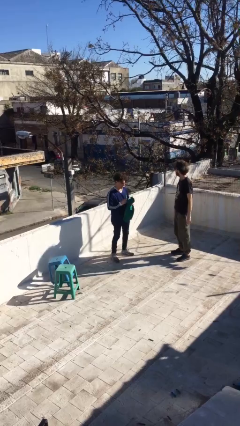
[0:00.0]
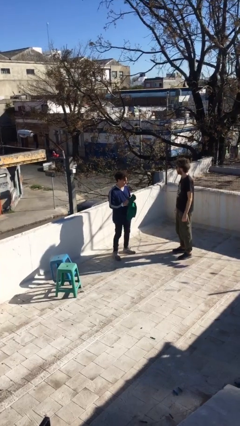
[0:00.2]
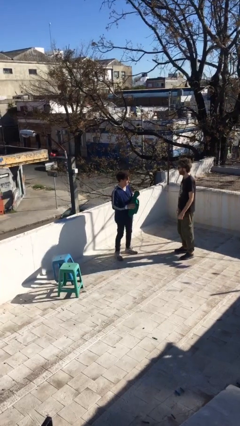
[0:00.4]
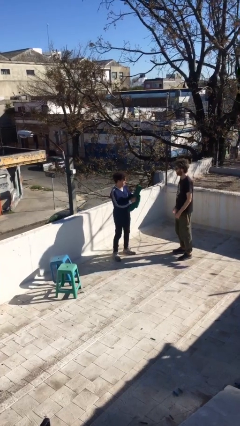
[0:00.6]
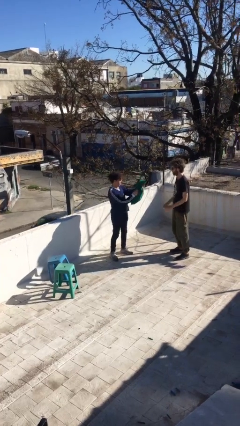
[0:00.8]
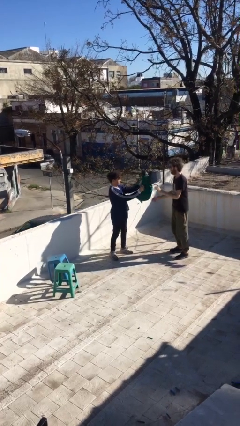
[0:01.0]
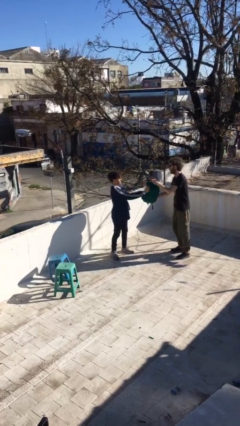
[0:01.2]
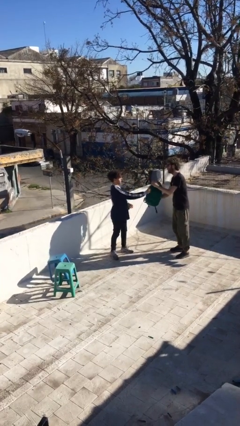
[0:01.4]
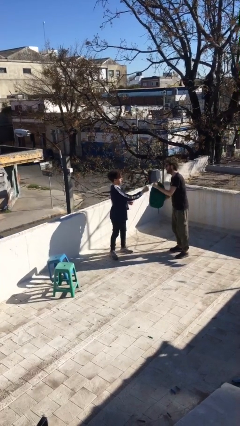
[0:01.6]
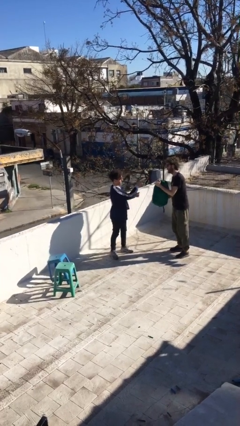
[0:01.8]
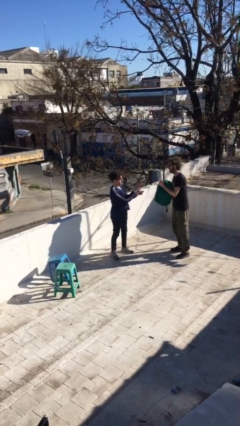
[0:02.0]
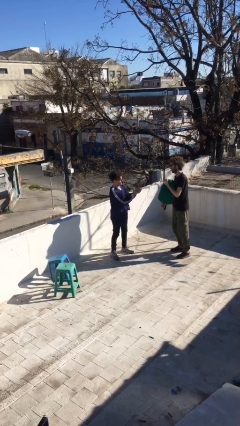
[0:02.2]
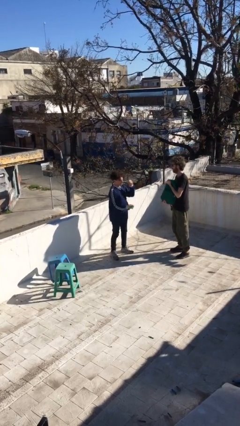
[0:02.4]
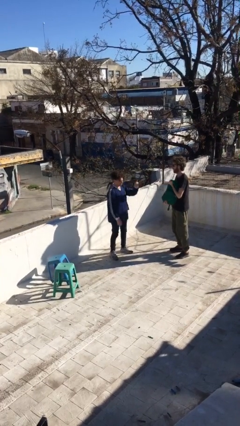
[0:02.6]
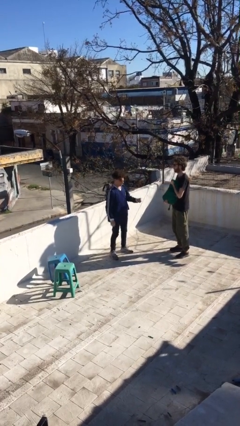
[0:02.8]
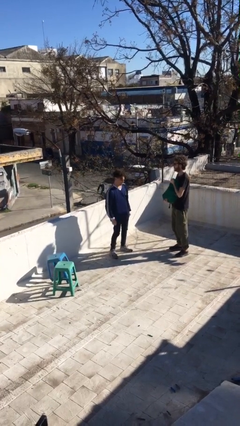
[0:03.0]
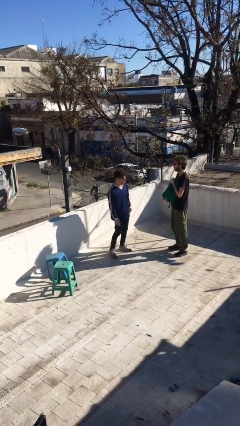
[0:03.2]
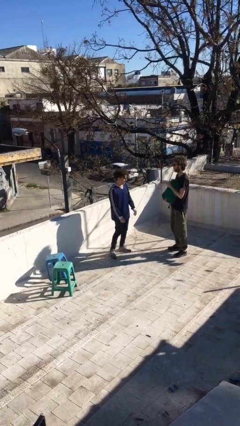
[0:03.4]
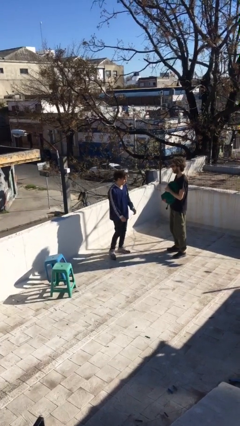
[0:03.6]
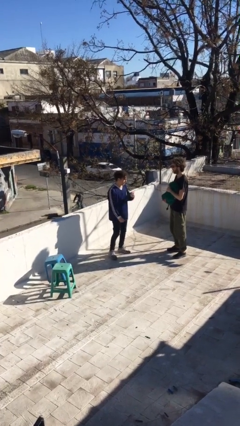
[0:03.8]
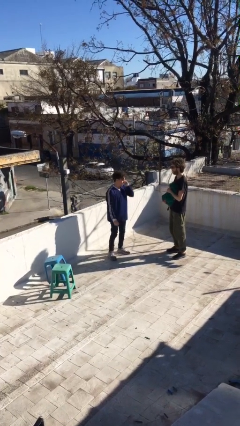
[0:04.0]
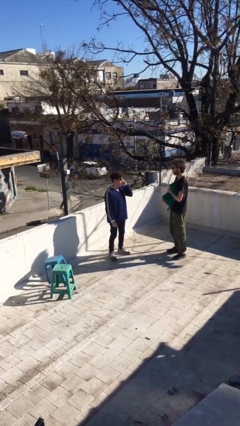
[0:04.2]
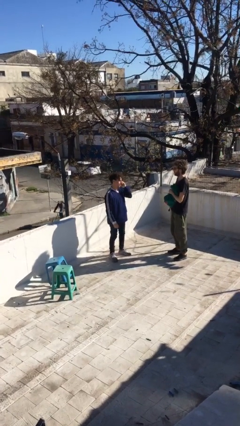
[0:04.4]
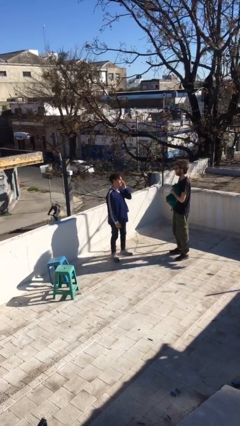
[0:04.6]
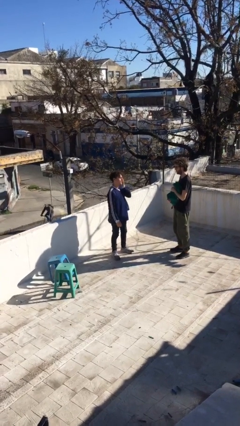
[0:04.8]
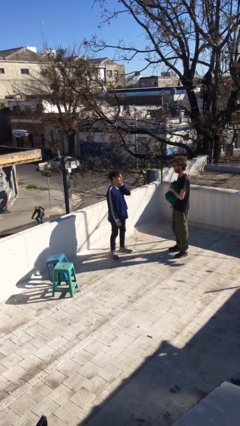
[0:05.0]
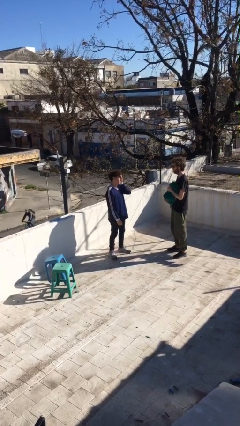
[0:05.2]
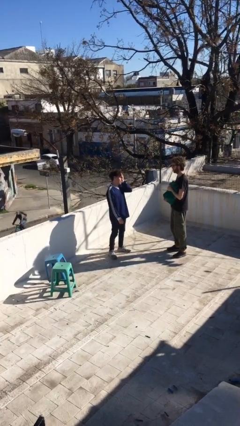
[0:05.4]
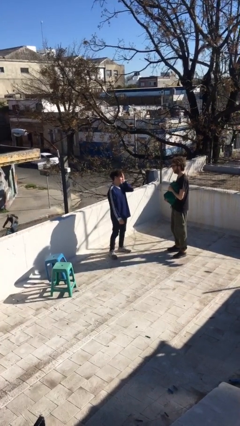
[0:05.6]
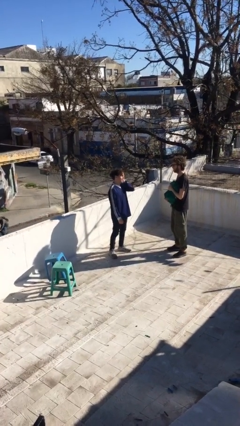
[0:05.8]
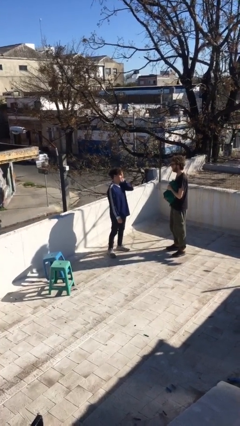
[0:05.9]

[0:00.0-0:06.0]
person transfers object to person

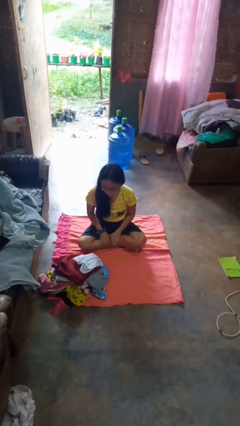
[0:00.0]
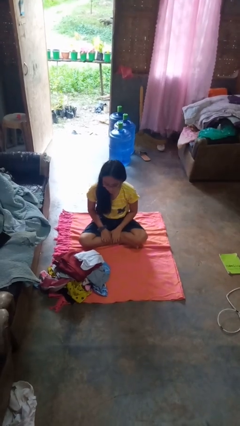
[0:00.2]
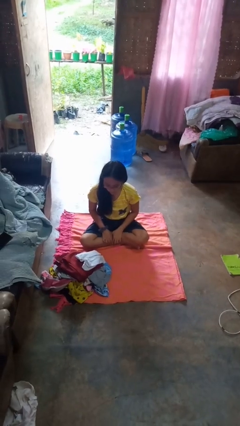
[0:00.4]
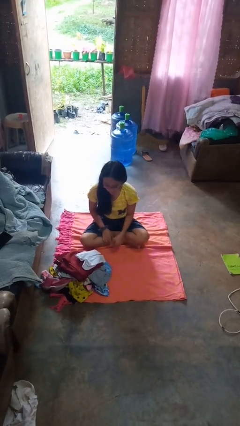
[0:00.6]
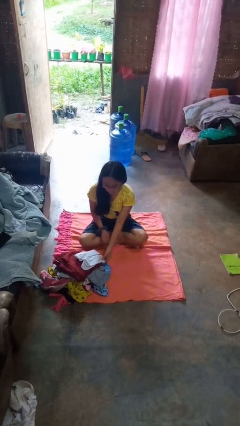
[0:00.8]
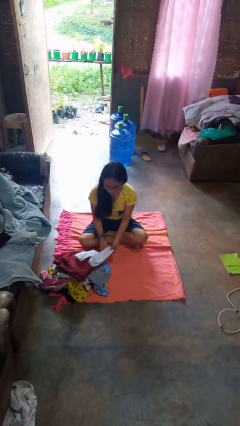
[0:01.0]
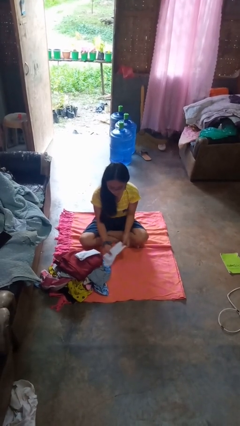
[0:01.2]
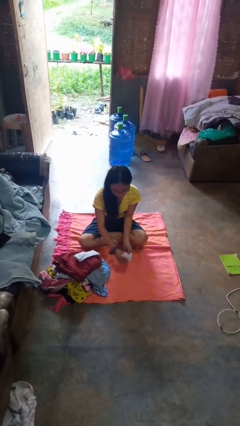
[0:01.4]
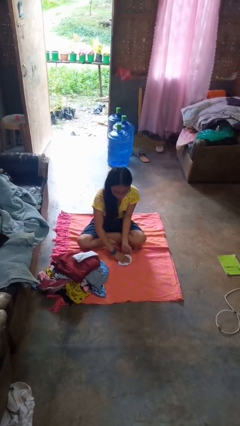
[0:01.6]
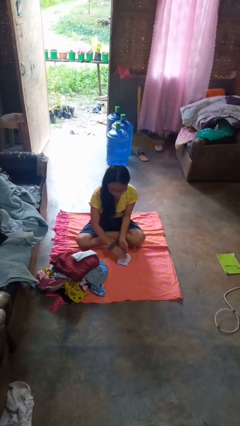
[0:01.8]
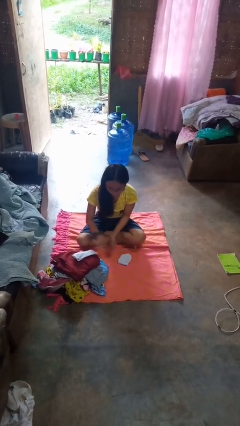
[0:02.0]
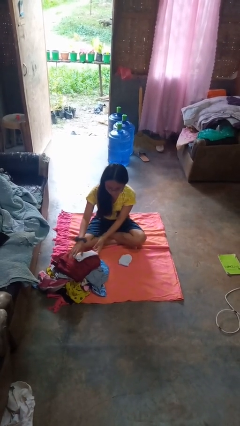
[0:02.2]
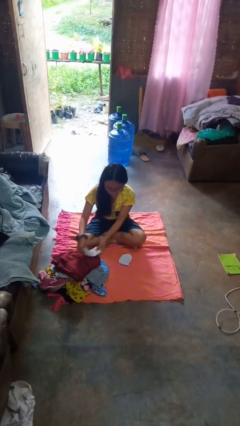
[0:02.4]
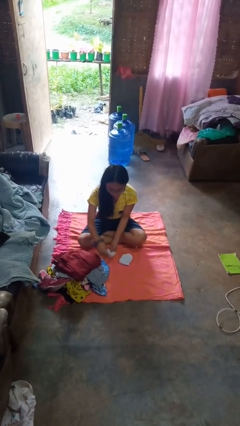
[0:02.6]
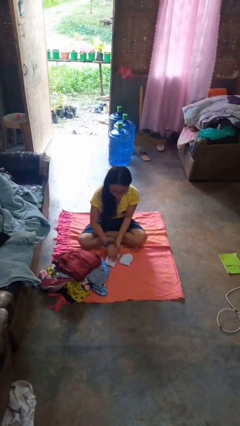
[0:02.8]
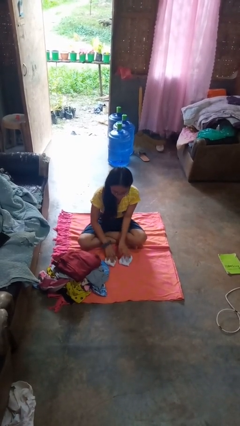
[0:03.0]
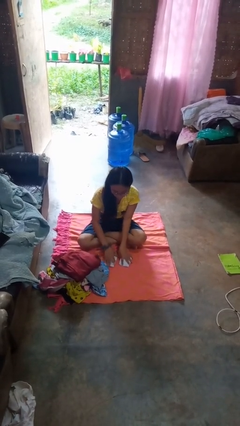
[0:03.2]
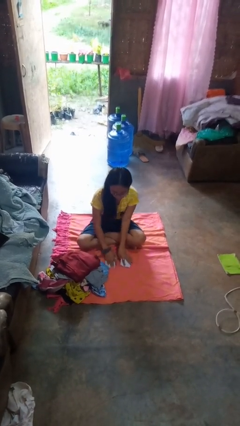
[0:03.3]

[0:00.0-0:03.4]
person folds socks

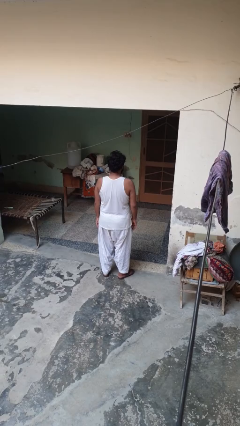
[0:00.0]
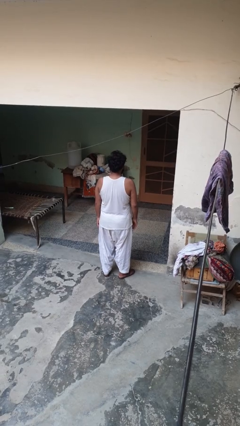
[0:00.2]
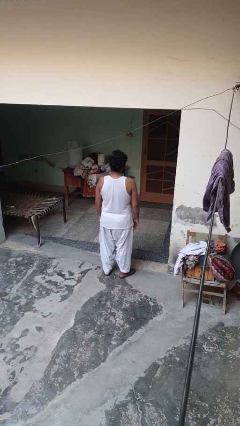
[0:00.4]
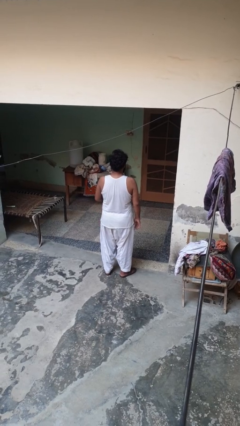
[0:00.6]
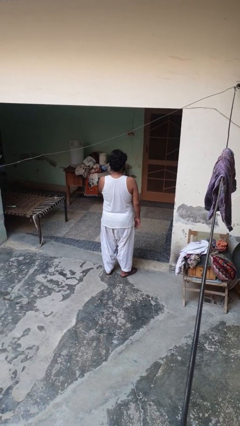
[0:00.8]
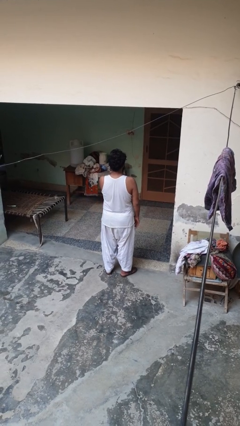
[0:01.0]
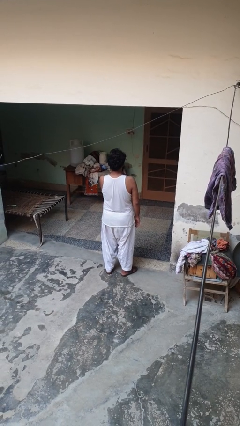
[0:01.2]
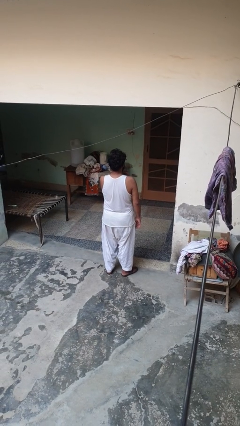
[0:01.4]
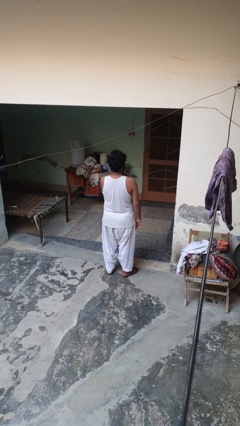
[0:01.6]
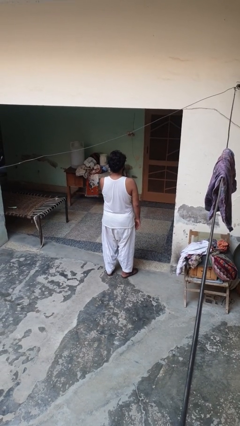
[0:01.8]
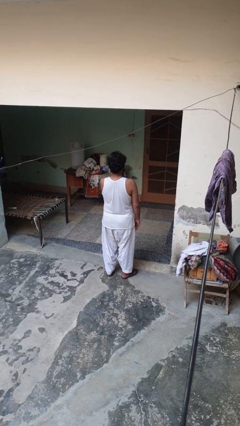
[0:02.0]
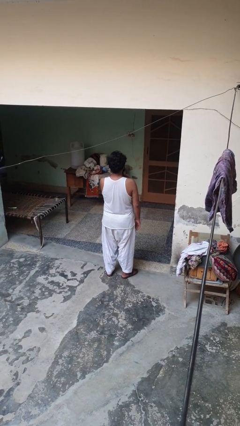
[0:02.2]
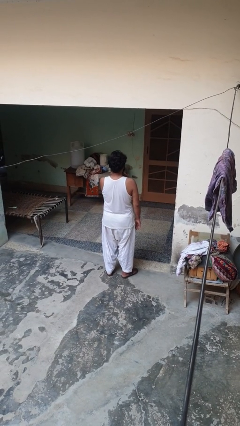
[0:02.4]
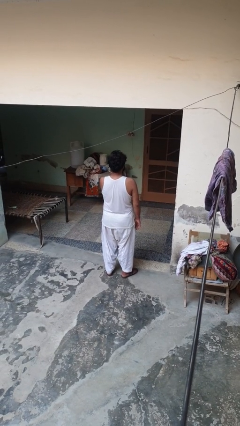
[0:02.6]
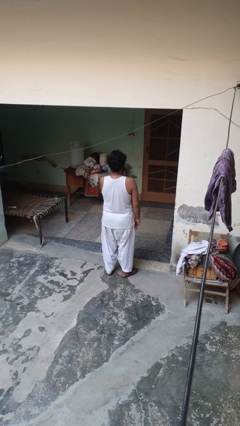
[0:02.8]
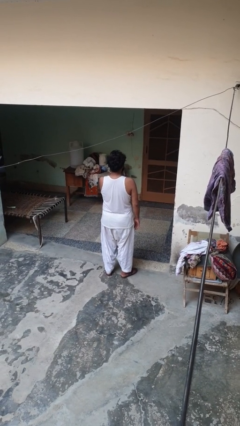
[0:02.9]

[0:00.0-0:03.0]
person drums on chest

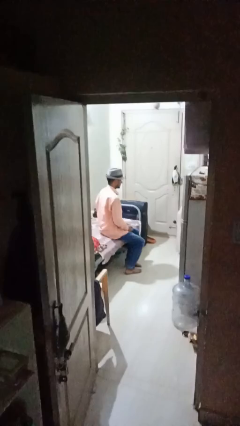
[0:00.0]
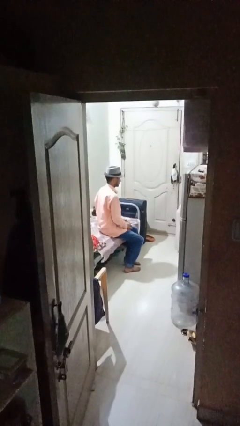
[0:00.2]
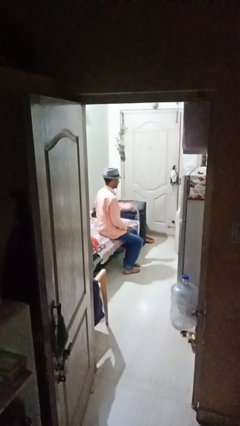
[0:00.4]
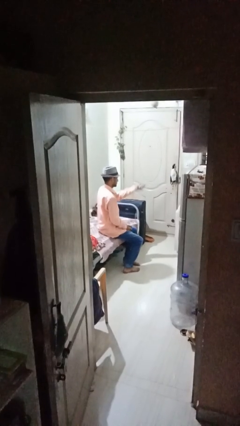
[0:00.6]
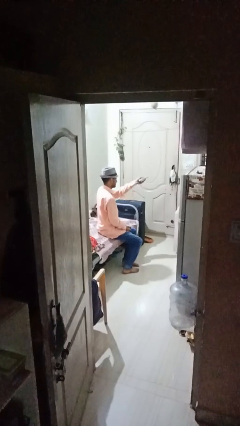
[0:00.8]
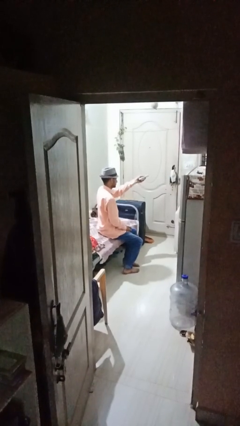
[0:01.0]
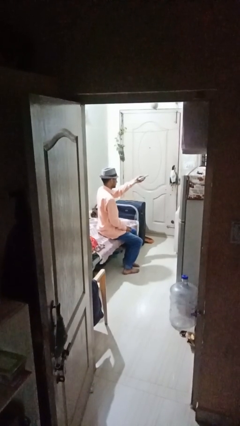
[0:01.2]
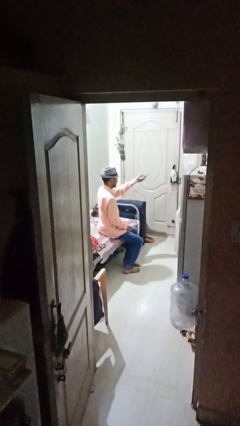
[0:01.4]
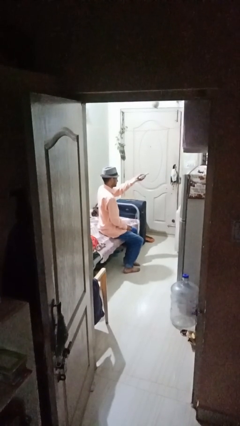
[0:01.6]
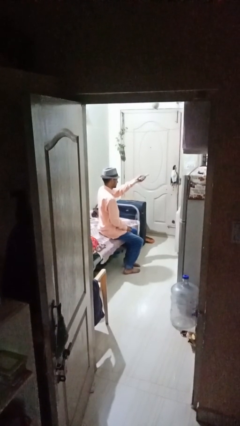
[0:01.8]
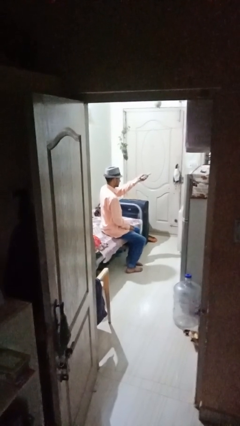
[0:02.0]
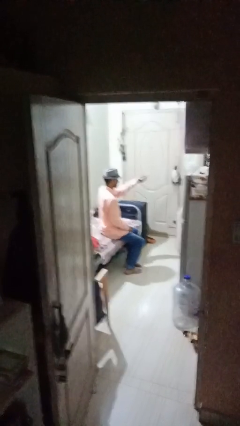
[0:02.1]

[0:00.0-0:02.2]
person uses television remote

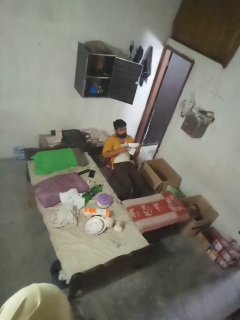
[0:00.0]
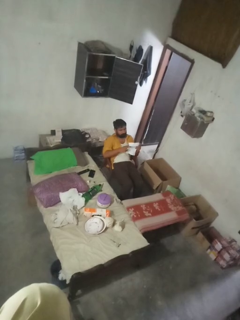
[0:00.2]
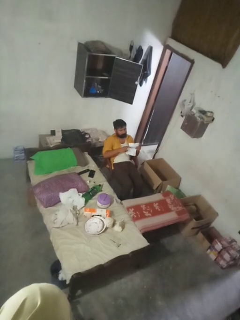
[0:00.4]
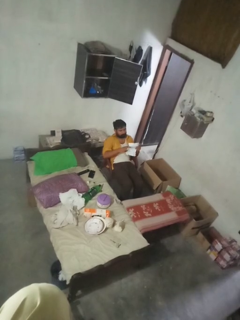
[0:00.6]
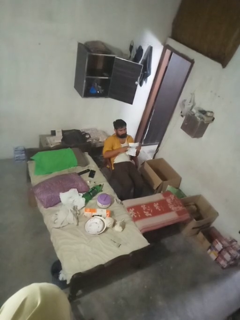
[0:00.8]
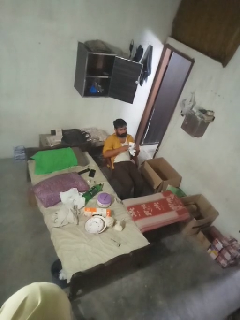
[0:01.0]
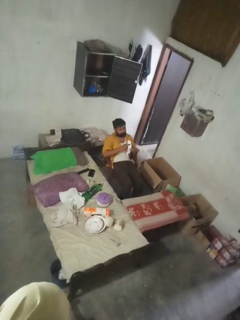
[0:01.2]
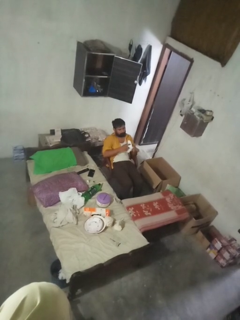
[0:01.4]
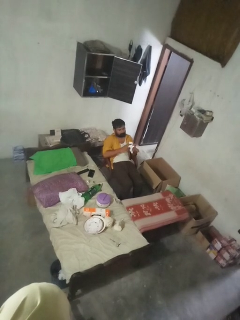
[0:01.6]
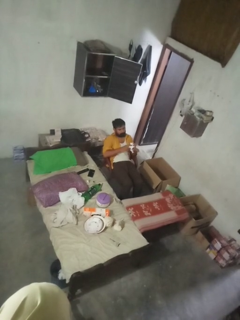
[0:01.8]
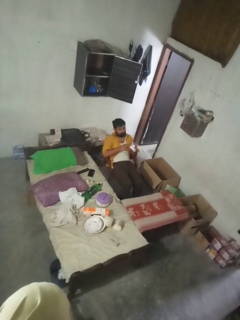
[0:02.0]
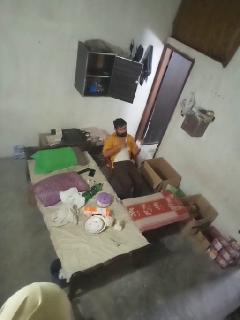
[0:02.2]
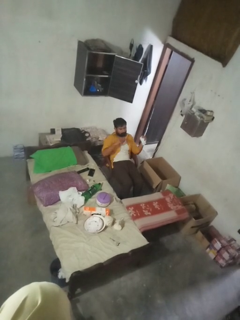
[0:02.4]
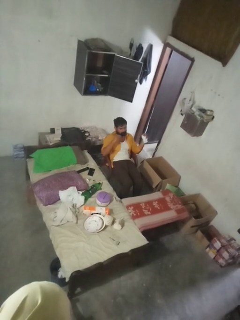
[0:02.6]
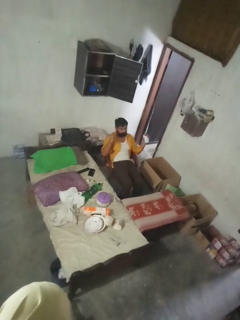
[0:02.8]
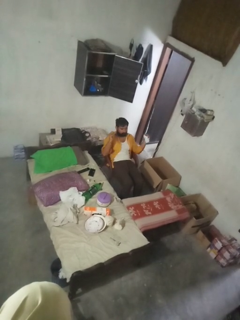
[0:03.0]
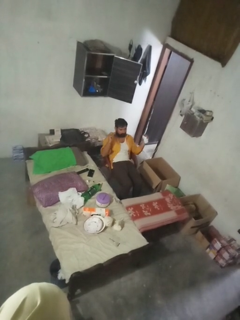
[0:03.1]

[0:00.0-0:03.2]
person crumples paper

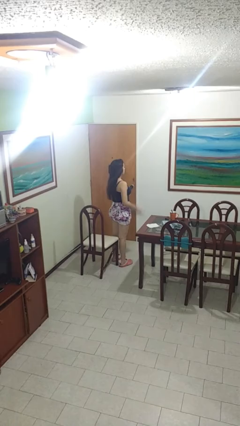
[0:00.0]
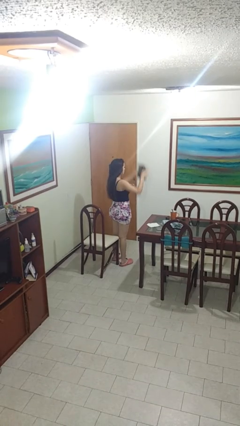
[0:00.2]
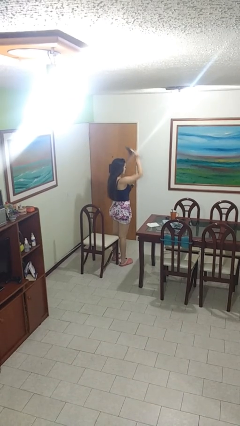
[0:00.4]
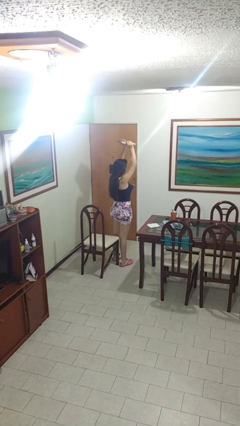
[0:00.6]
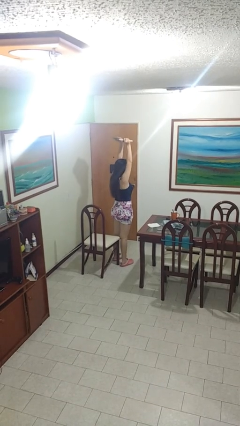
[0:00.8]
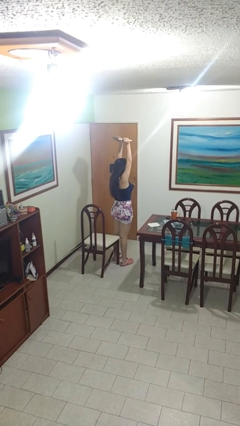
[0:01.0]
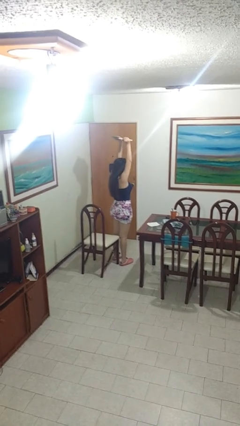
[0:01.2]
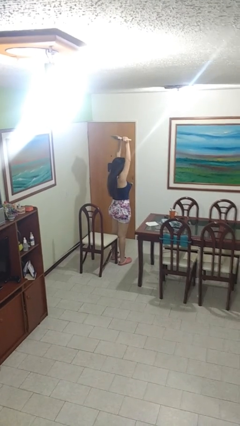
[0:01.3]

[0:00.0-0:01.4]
person holds object above head
